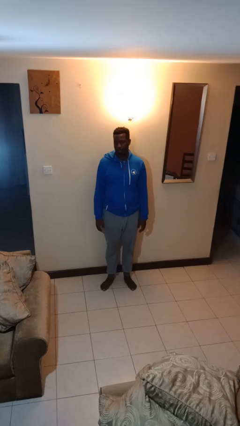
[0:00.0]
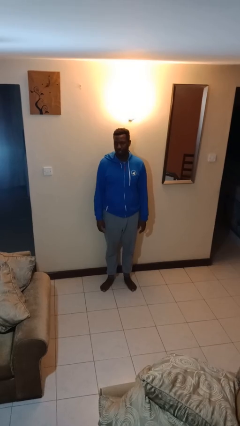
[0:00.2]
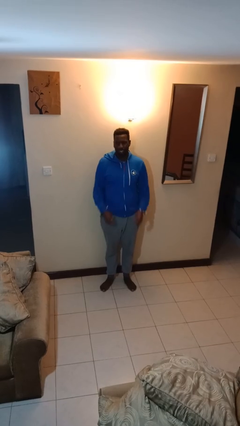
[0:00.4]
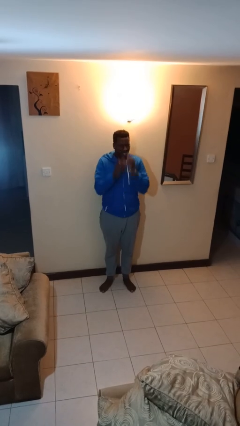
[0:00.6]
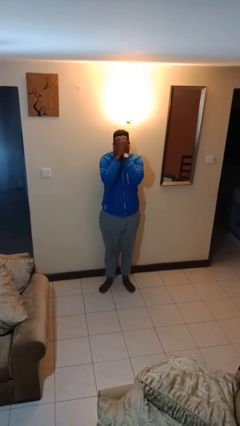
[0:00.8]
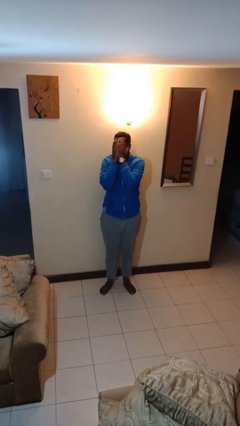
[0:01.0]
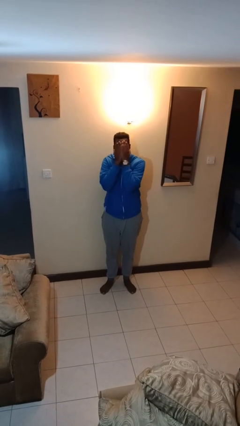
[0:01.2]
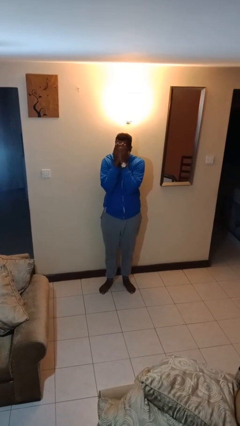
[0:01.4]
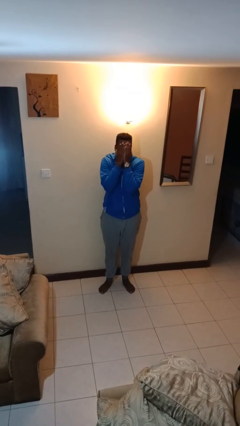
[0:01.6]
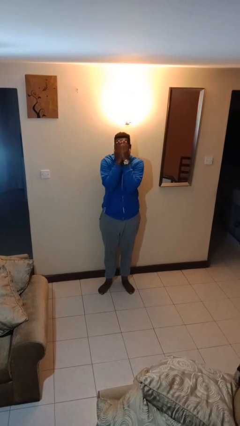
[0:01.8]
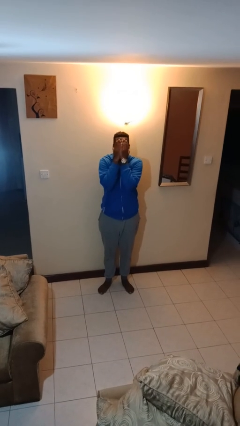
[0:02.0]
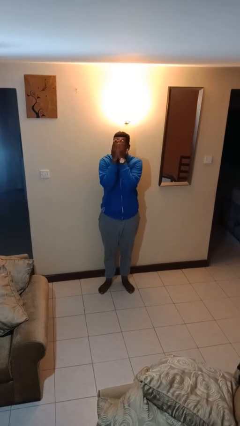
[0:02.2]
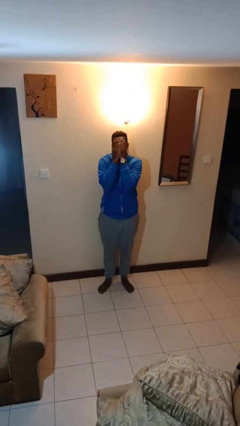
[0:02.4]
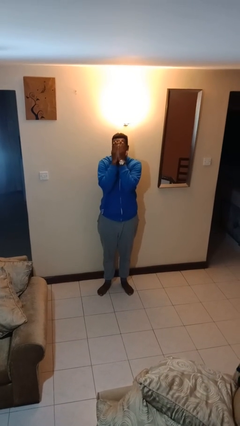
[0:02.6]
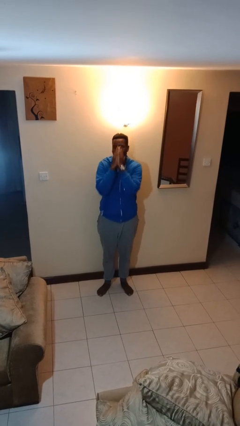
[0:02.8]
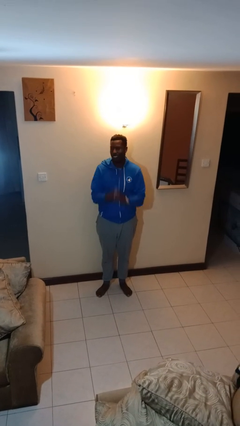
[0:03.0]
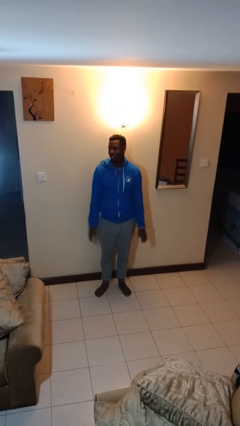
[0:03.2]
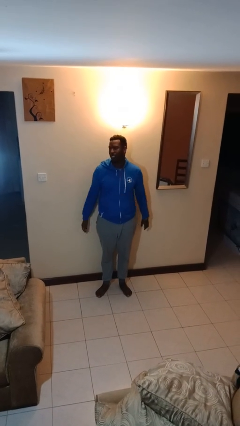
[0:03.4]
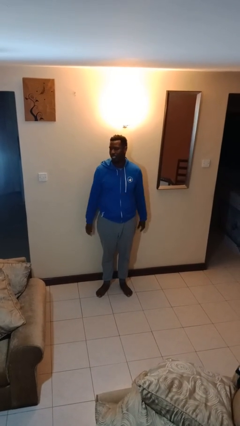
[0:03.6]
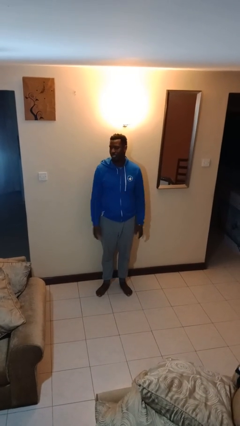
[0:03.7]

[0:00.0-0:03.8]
person covers face with hands

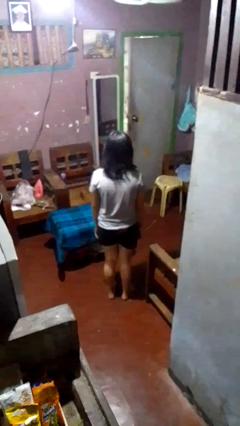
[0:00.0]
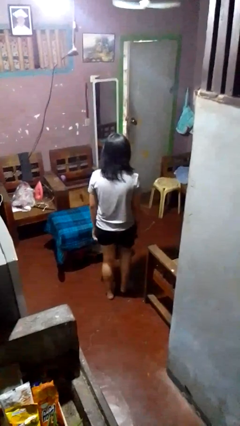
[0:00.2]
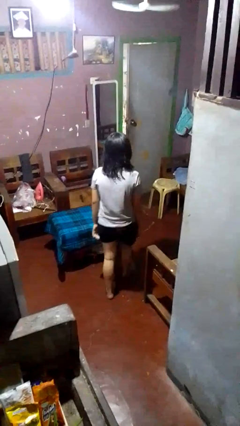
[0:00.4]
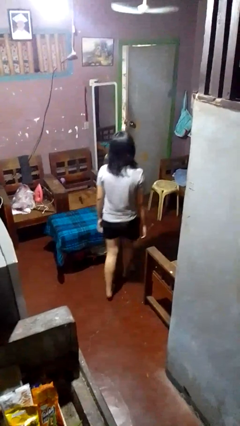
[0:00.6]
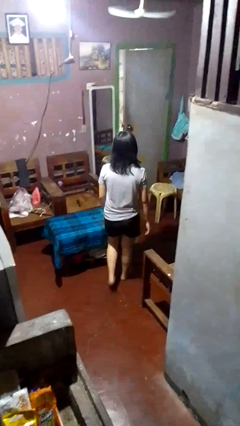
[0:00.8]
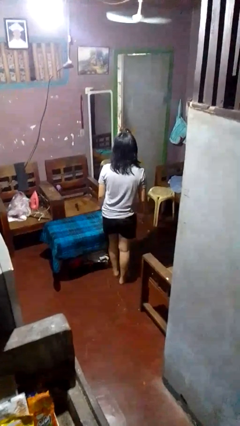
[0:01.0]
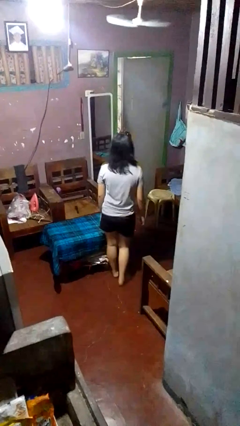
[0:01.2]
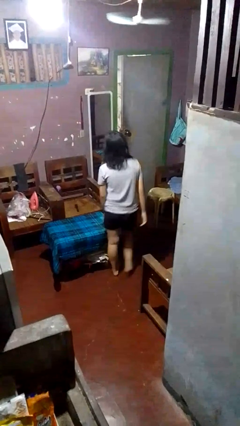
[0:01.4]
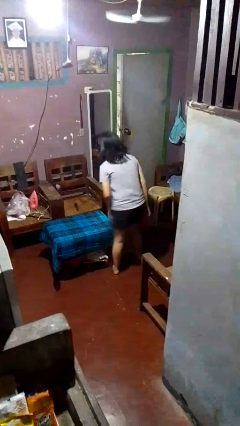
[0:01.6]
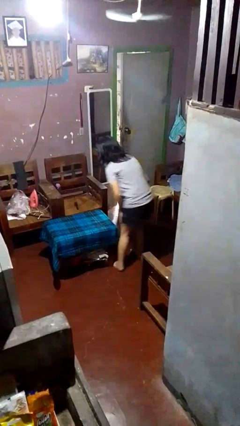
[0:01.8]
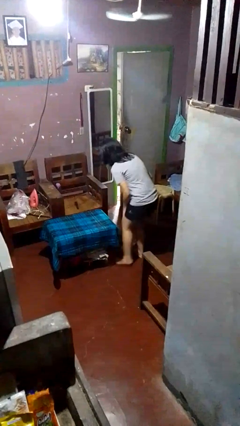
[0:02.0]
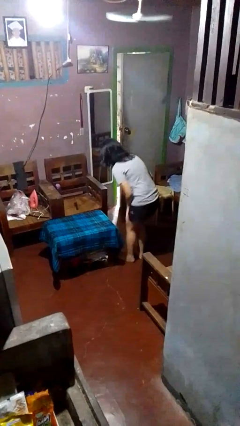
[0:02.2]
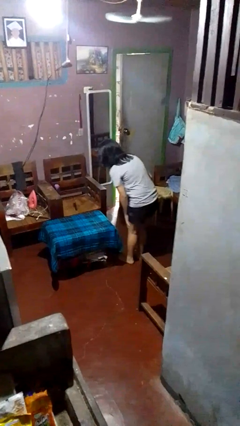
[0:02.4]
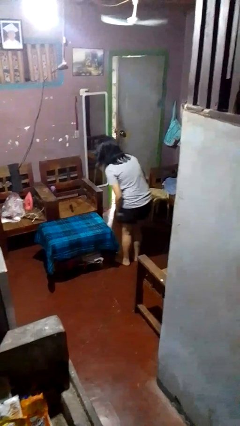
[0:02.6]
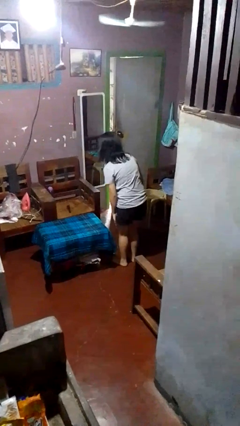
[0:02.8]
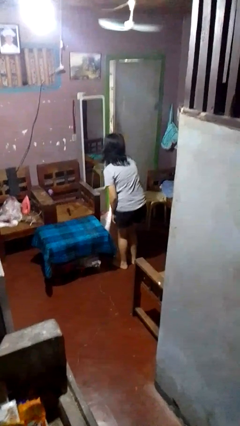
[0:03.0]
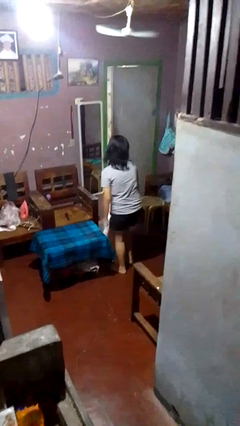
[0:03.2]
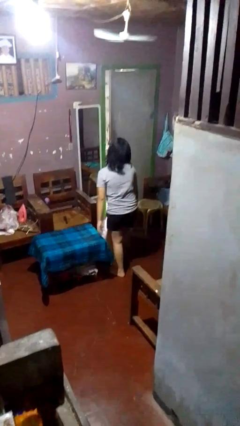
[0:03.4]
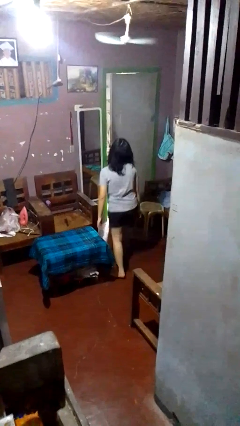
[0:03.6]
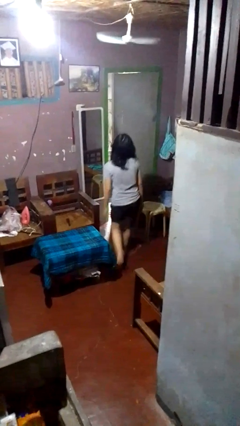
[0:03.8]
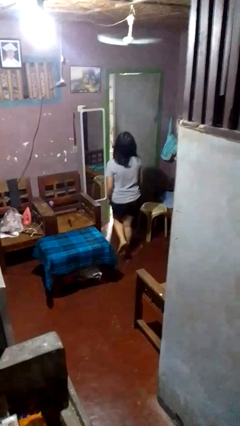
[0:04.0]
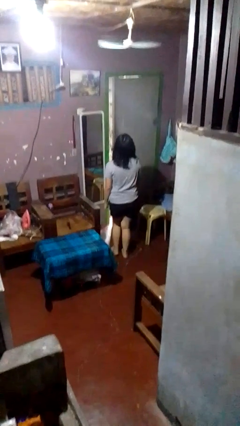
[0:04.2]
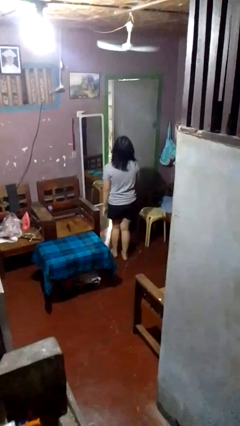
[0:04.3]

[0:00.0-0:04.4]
person bumps into table

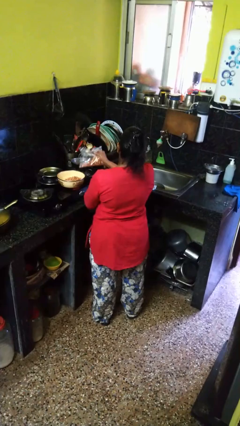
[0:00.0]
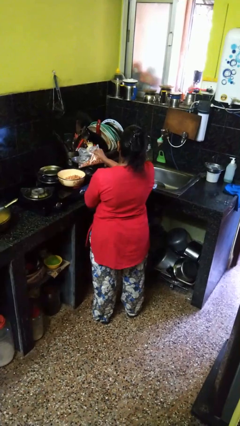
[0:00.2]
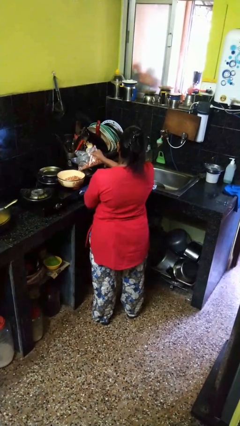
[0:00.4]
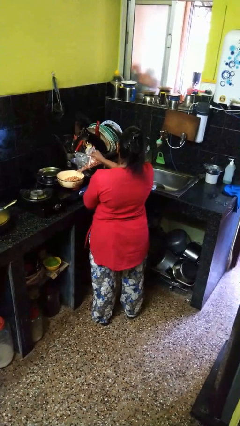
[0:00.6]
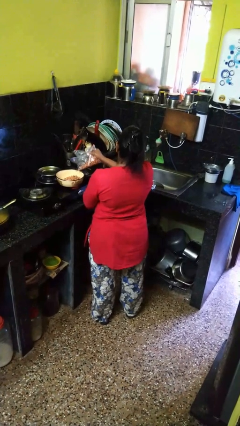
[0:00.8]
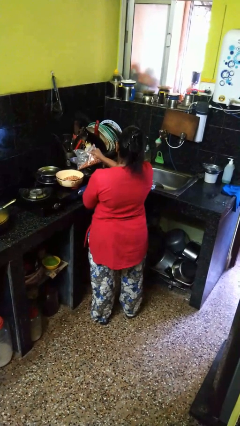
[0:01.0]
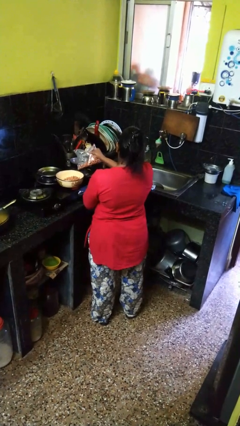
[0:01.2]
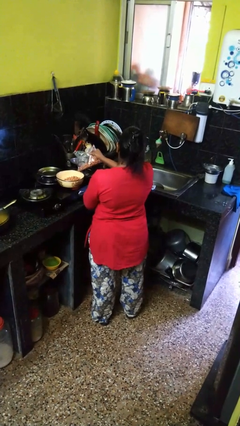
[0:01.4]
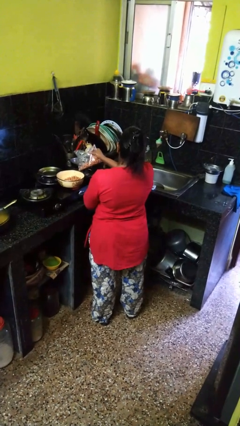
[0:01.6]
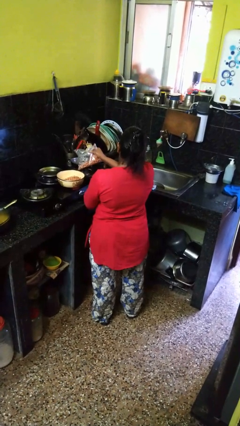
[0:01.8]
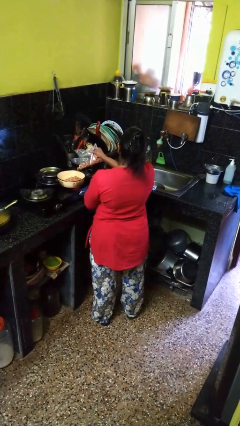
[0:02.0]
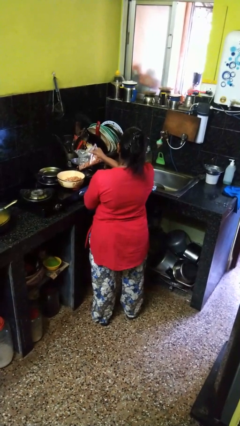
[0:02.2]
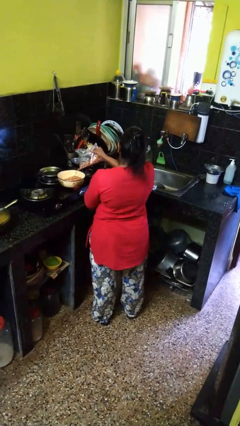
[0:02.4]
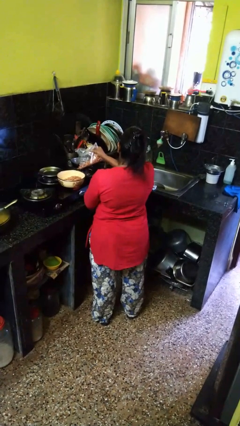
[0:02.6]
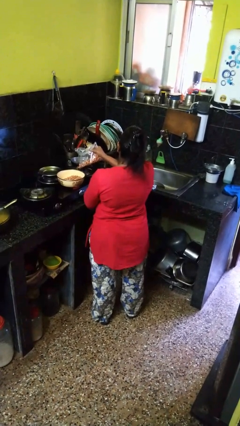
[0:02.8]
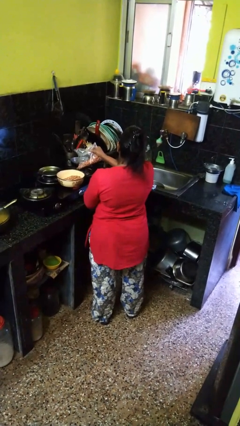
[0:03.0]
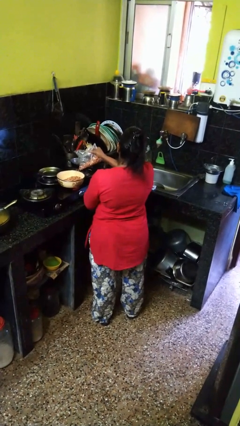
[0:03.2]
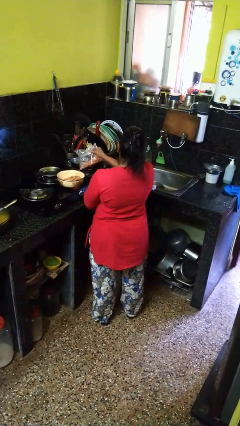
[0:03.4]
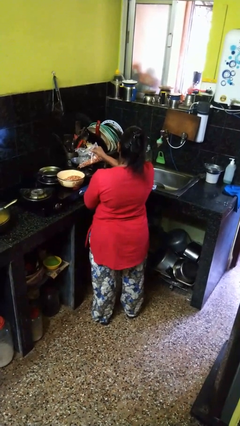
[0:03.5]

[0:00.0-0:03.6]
person pours into bowl

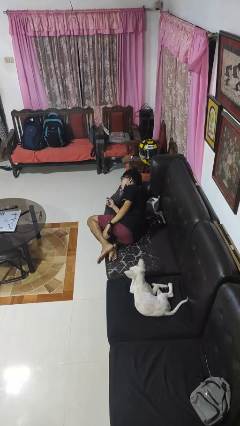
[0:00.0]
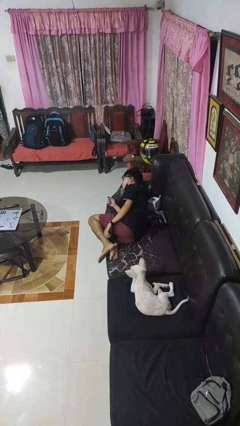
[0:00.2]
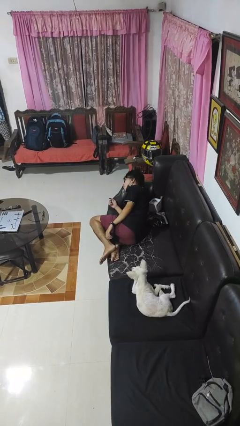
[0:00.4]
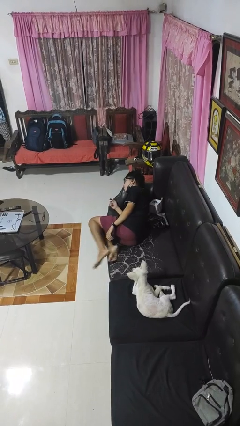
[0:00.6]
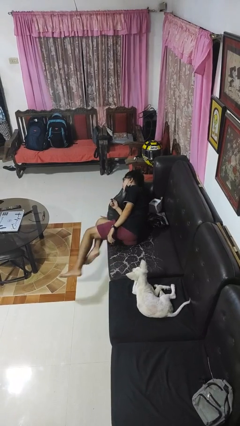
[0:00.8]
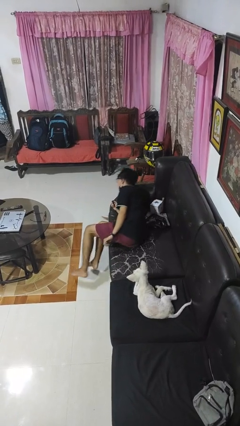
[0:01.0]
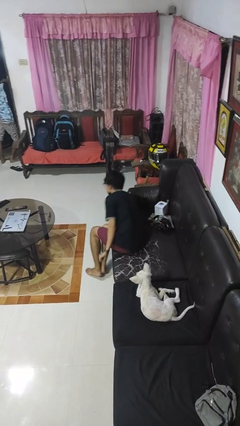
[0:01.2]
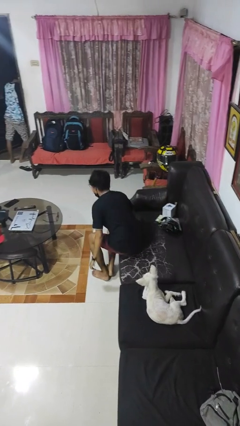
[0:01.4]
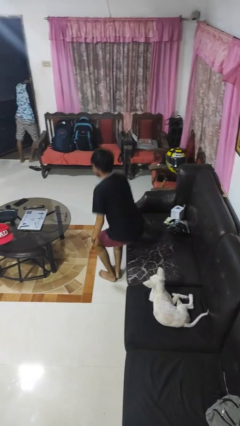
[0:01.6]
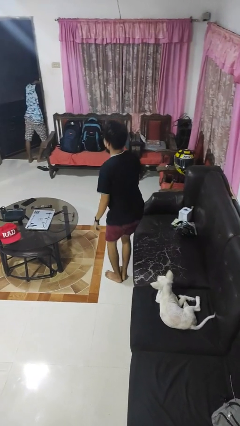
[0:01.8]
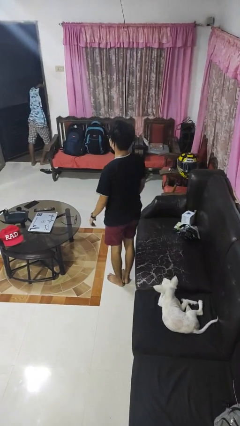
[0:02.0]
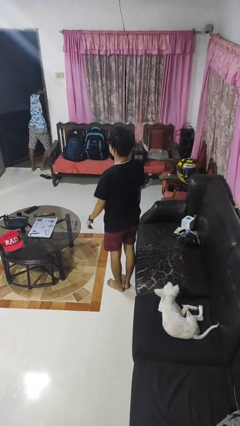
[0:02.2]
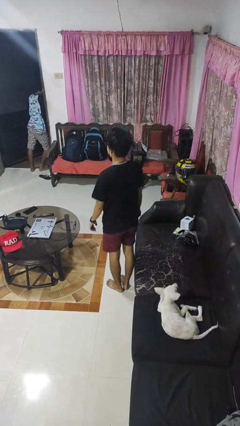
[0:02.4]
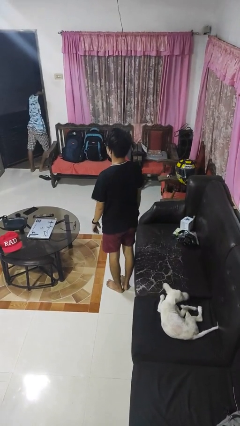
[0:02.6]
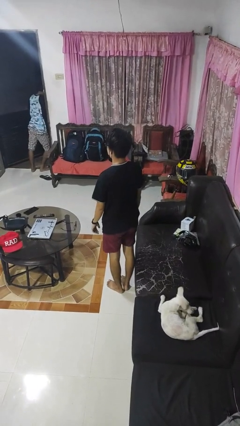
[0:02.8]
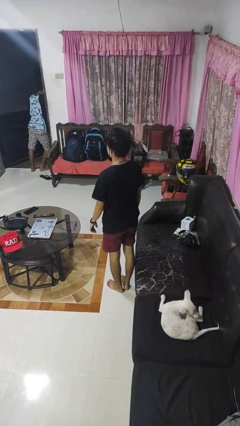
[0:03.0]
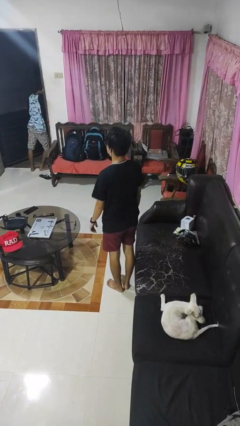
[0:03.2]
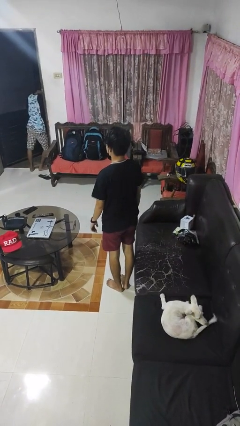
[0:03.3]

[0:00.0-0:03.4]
person stands up

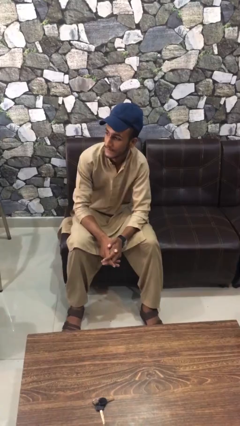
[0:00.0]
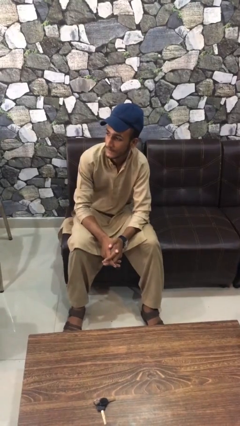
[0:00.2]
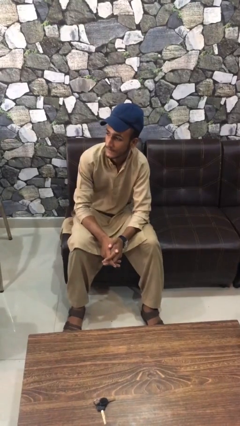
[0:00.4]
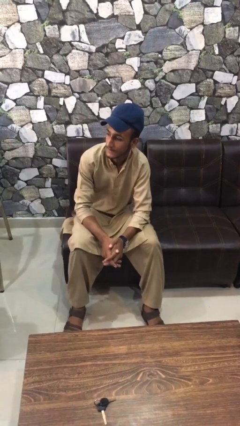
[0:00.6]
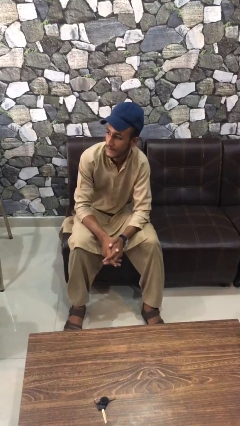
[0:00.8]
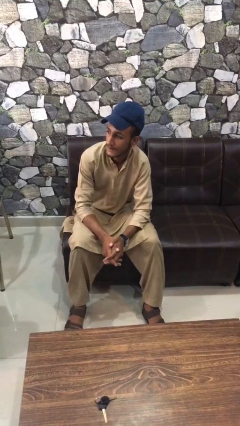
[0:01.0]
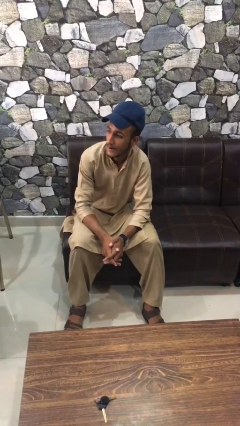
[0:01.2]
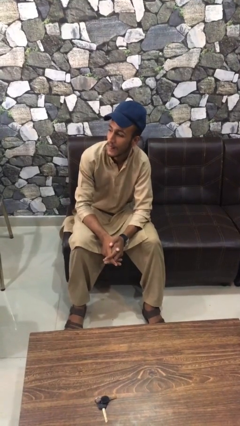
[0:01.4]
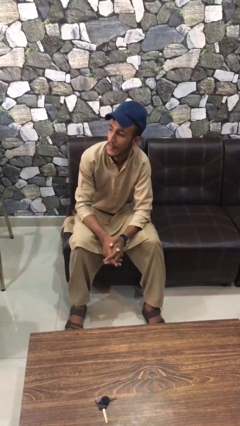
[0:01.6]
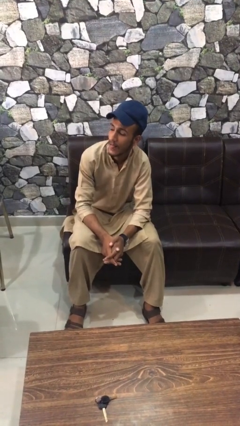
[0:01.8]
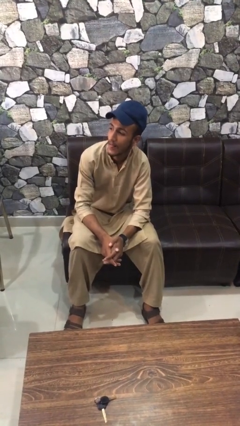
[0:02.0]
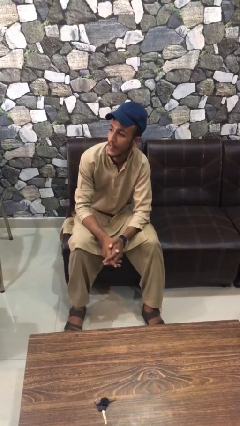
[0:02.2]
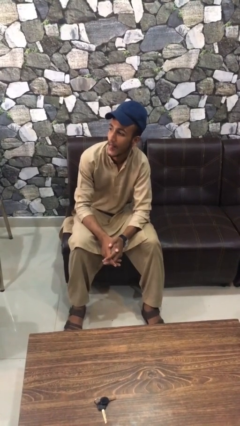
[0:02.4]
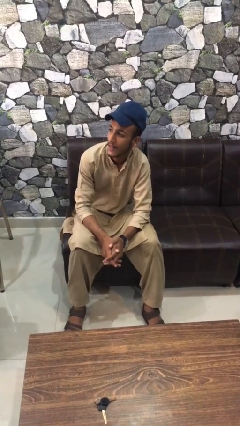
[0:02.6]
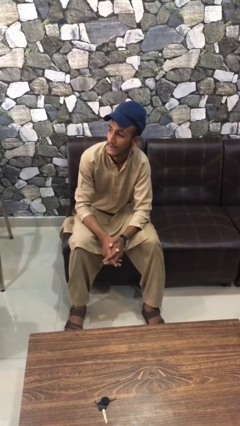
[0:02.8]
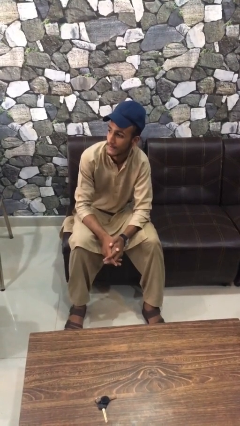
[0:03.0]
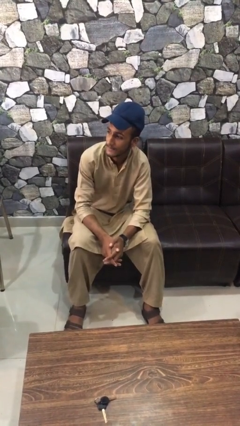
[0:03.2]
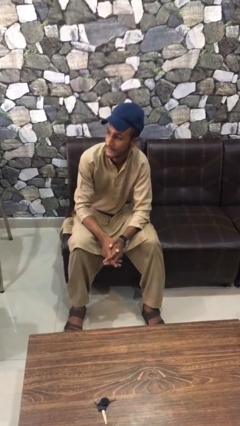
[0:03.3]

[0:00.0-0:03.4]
person sticks out tongue
